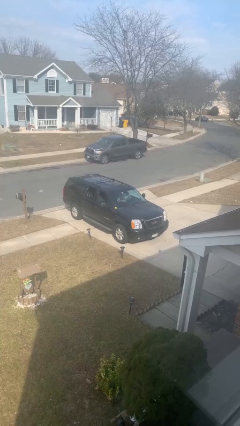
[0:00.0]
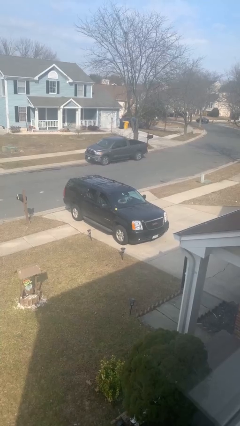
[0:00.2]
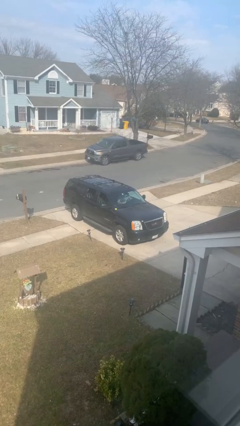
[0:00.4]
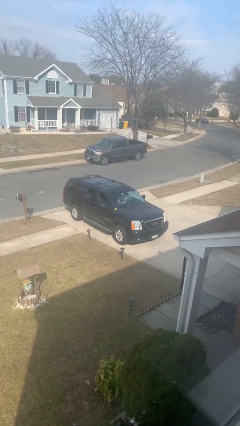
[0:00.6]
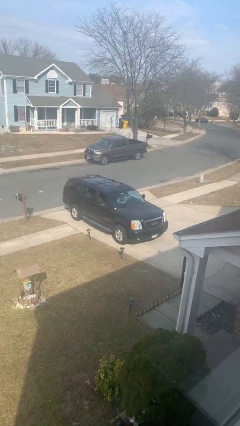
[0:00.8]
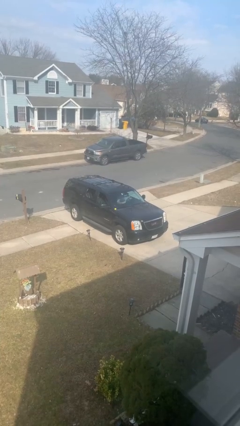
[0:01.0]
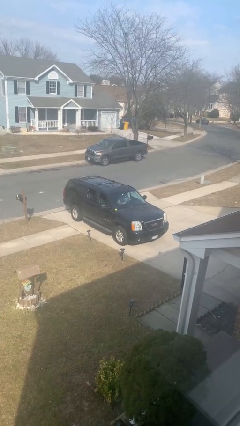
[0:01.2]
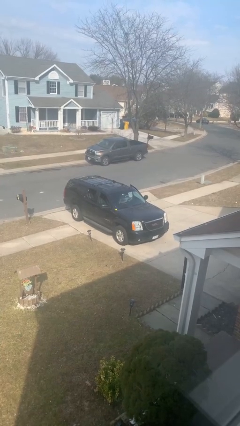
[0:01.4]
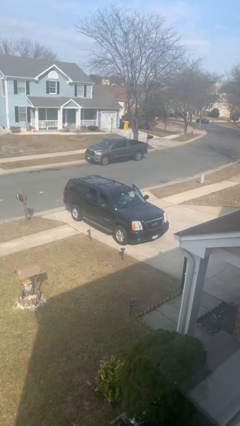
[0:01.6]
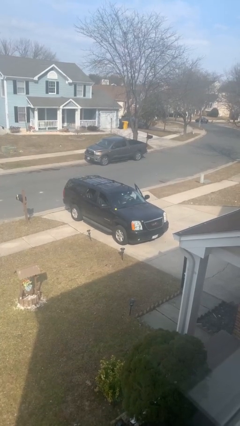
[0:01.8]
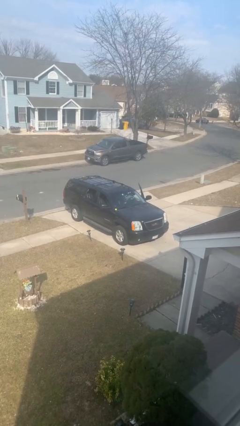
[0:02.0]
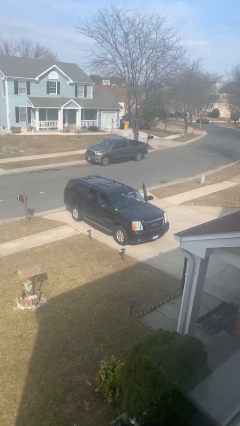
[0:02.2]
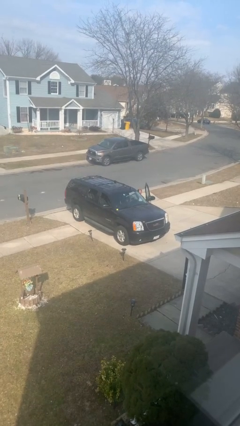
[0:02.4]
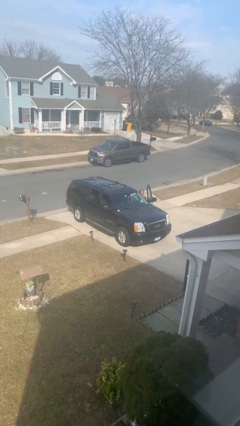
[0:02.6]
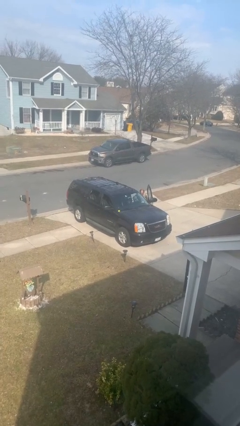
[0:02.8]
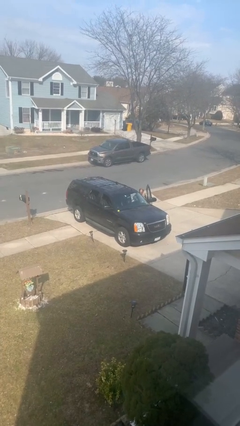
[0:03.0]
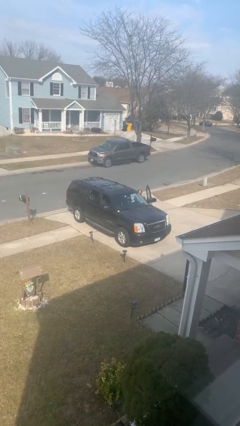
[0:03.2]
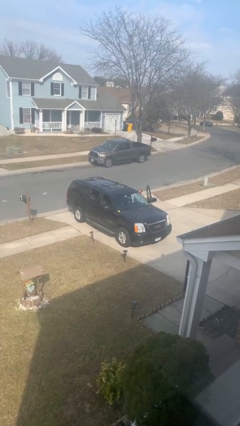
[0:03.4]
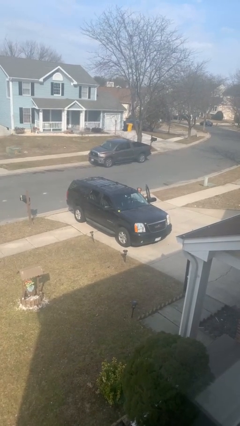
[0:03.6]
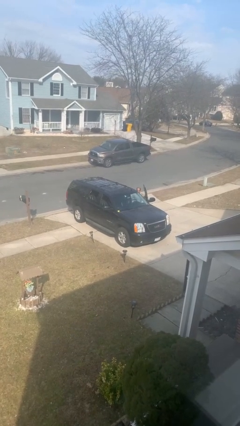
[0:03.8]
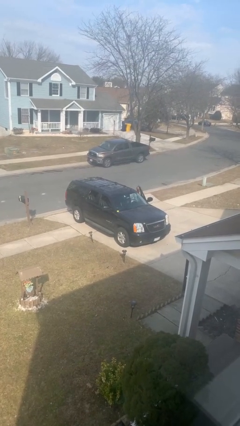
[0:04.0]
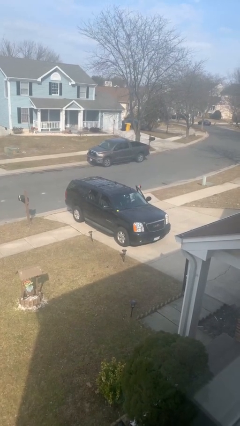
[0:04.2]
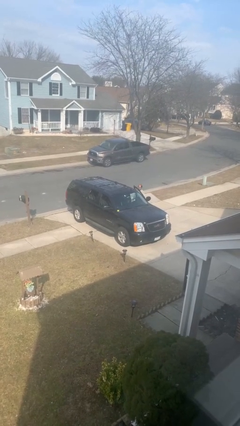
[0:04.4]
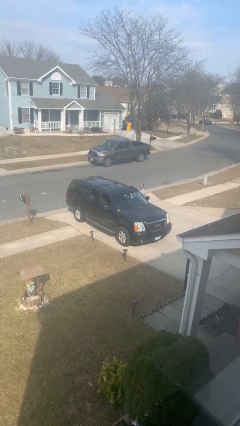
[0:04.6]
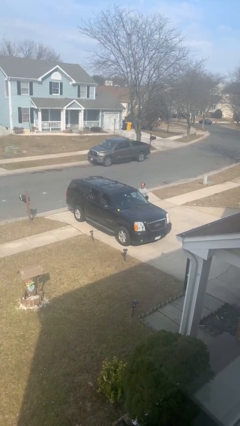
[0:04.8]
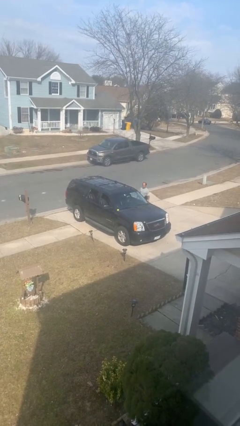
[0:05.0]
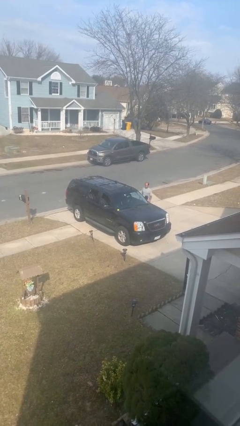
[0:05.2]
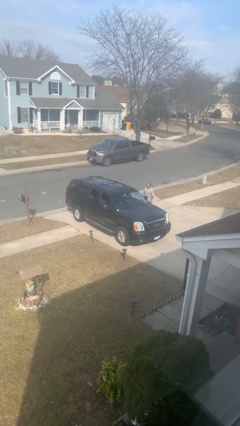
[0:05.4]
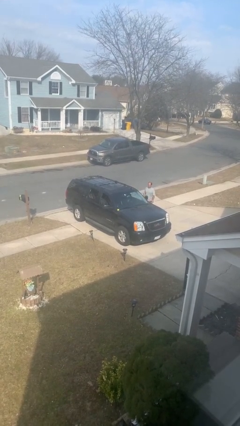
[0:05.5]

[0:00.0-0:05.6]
car drops off person

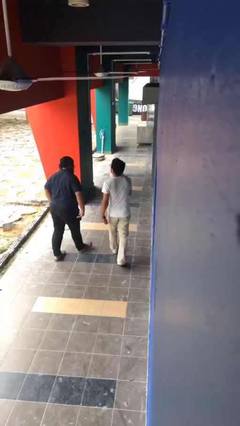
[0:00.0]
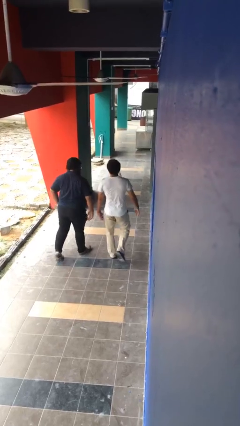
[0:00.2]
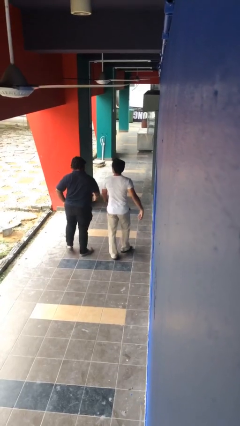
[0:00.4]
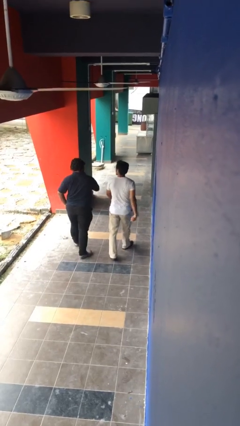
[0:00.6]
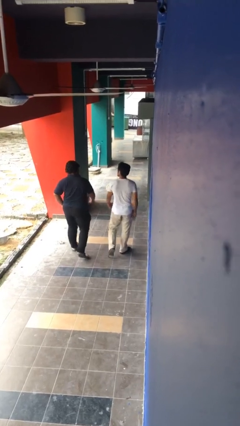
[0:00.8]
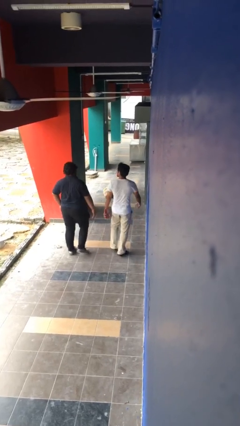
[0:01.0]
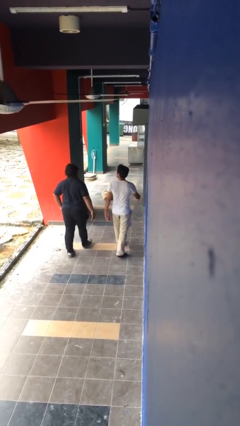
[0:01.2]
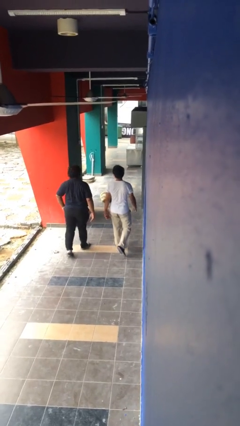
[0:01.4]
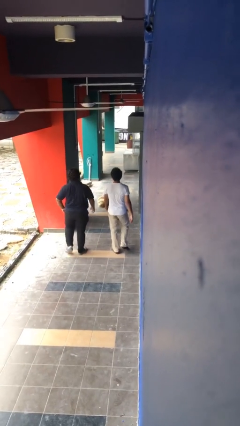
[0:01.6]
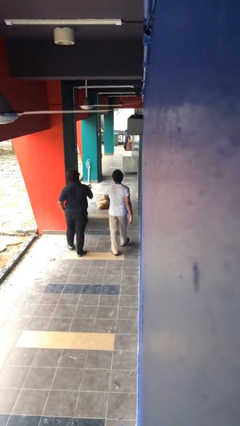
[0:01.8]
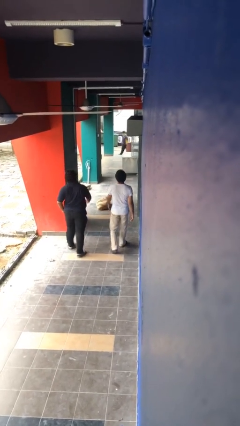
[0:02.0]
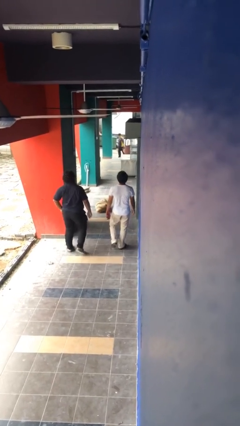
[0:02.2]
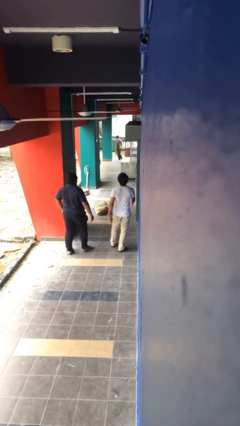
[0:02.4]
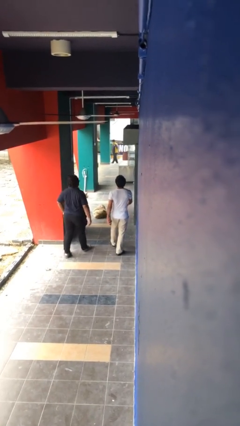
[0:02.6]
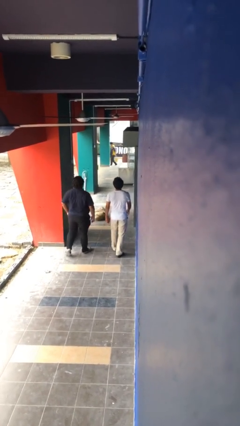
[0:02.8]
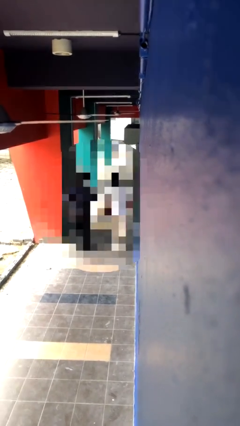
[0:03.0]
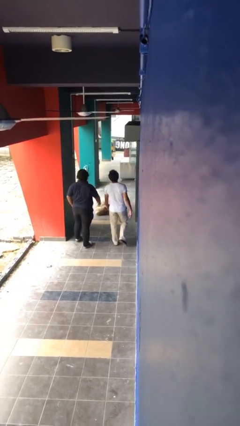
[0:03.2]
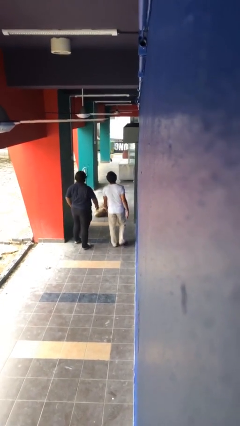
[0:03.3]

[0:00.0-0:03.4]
person talks to person

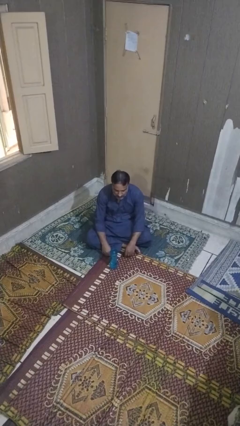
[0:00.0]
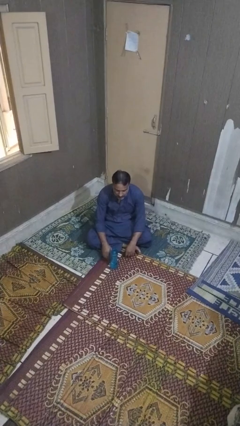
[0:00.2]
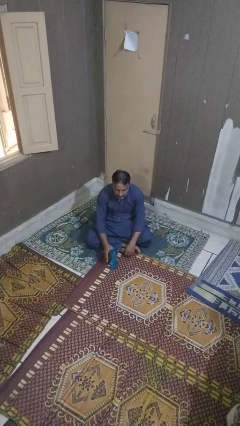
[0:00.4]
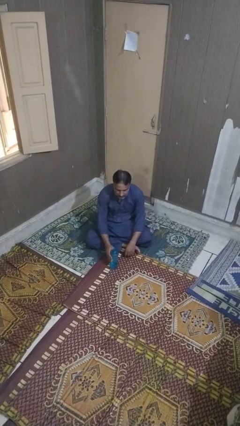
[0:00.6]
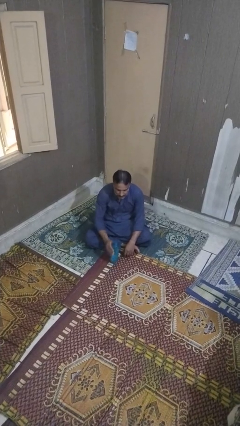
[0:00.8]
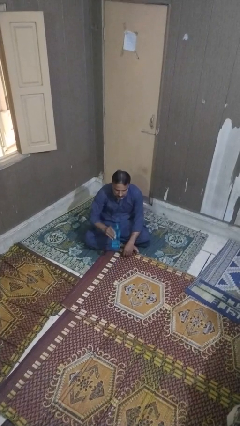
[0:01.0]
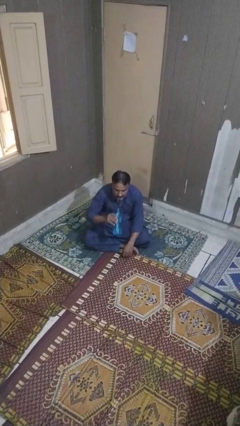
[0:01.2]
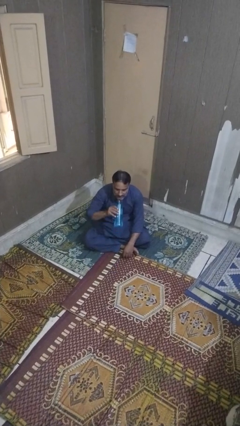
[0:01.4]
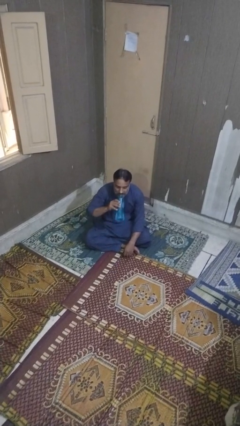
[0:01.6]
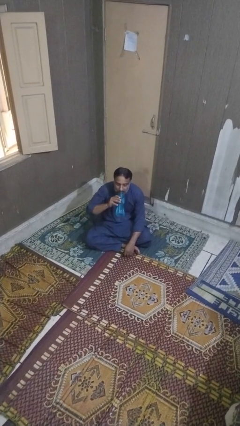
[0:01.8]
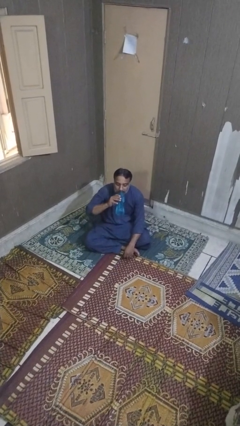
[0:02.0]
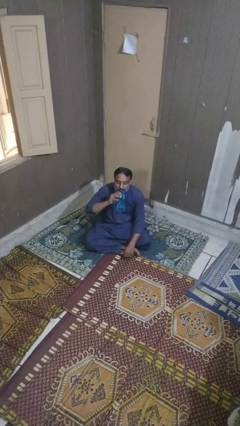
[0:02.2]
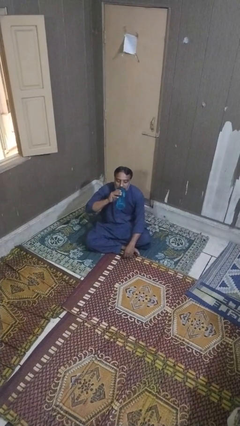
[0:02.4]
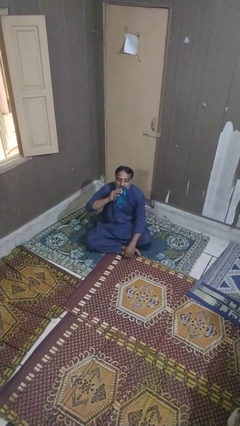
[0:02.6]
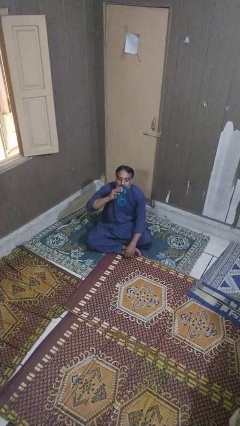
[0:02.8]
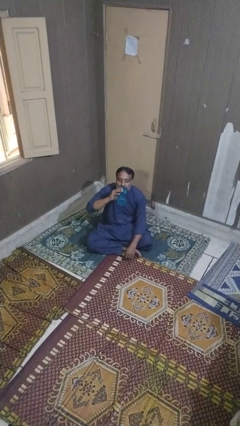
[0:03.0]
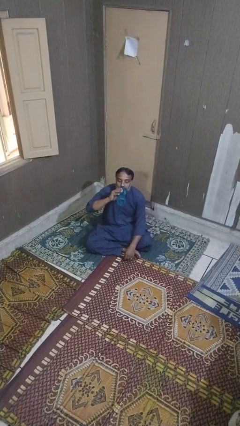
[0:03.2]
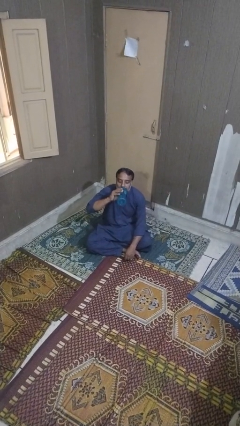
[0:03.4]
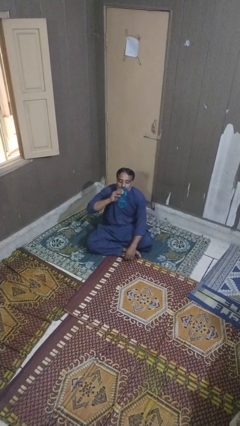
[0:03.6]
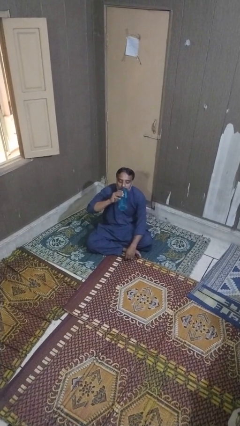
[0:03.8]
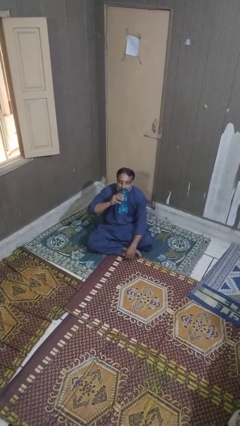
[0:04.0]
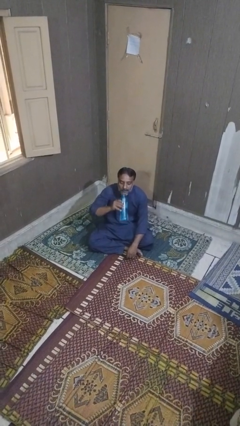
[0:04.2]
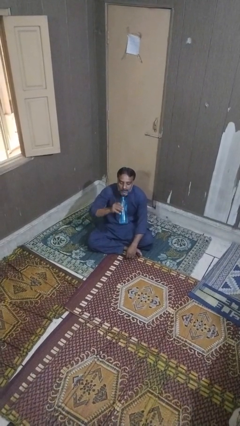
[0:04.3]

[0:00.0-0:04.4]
person drinks from bottle

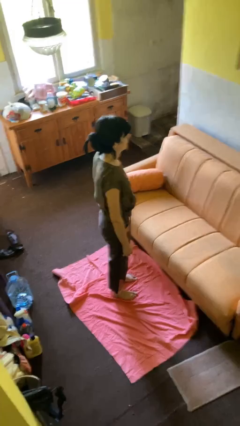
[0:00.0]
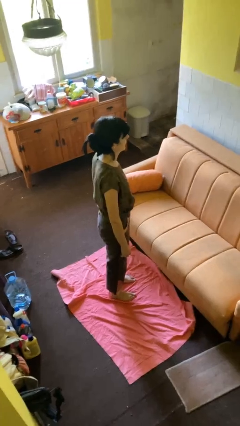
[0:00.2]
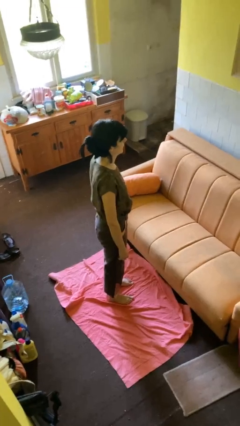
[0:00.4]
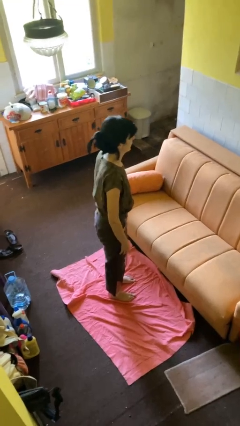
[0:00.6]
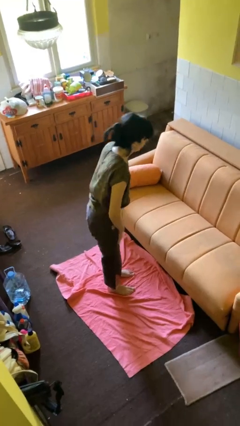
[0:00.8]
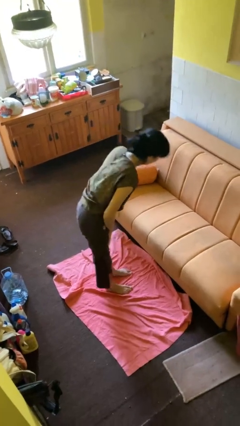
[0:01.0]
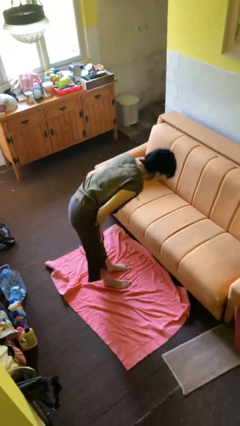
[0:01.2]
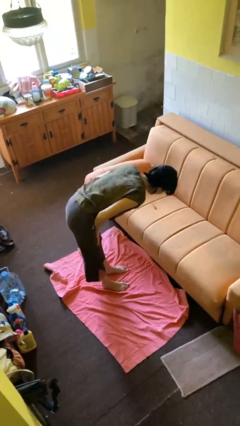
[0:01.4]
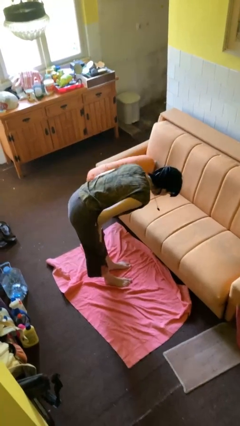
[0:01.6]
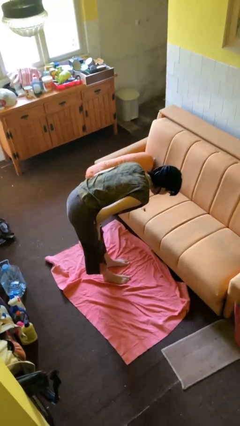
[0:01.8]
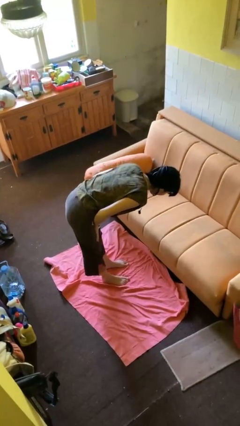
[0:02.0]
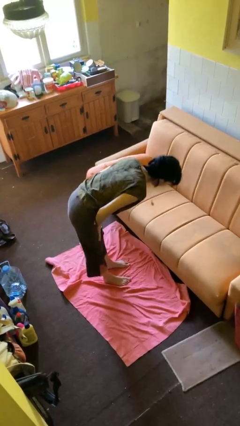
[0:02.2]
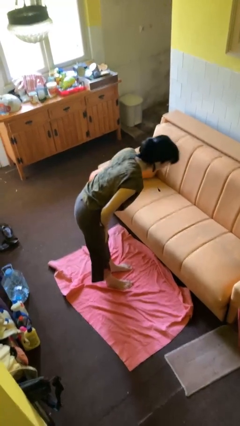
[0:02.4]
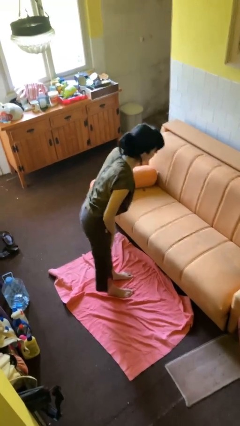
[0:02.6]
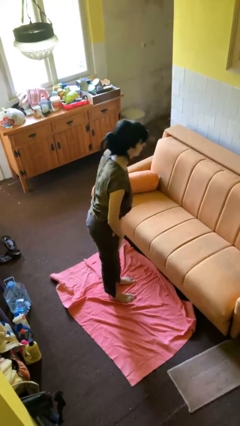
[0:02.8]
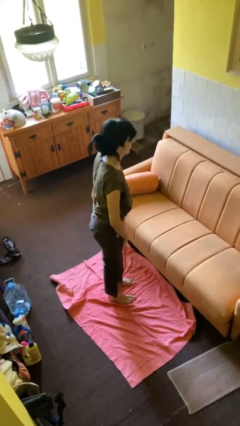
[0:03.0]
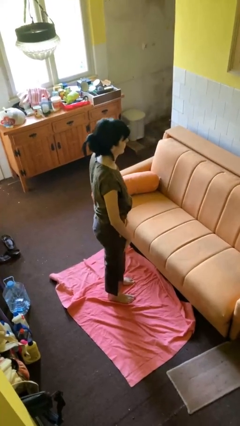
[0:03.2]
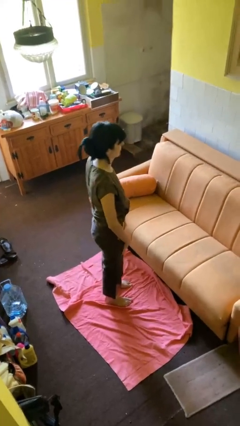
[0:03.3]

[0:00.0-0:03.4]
person bows

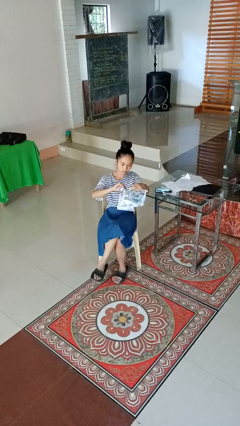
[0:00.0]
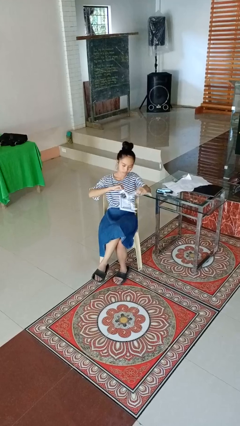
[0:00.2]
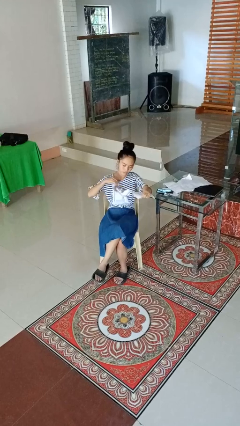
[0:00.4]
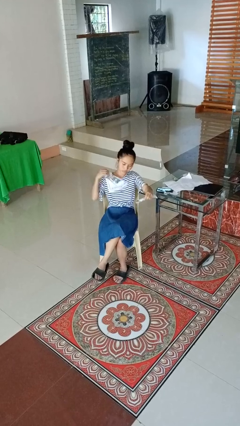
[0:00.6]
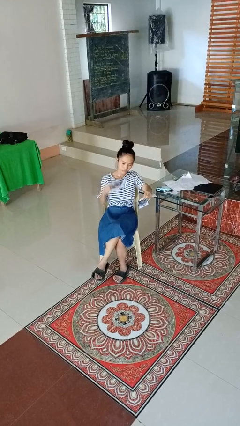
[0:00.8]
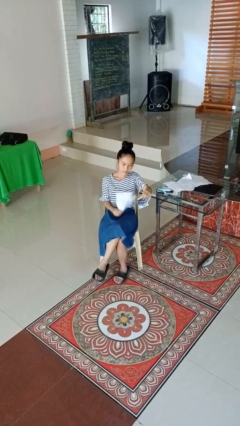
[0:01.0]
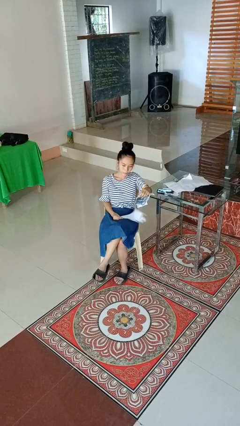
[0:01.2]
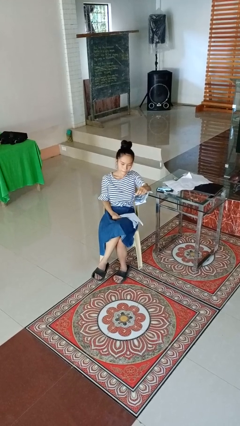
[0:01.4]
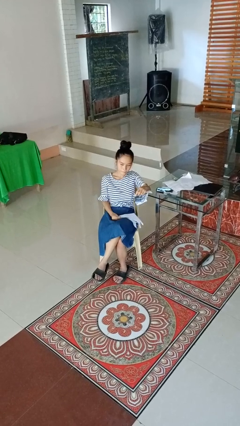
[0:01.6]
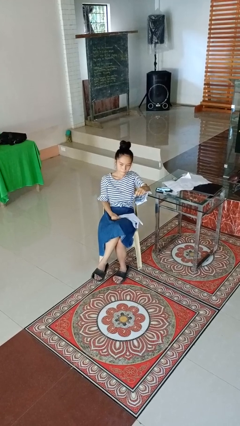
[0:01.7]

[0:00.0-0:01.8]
person tears paper
